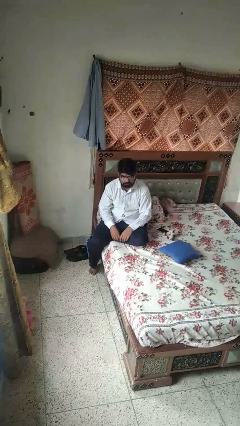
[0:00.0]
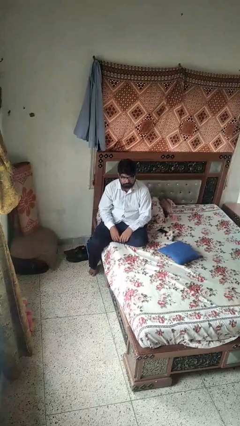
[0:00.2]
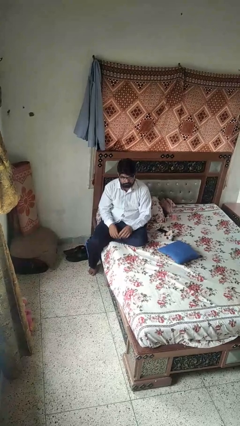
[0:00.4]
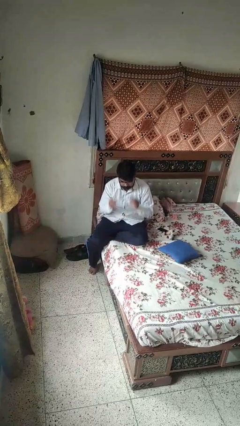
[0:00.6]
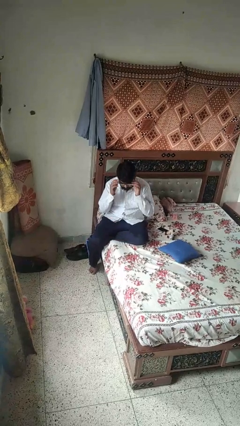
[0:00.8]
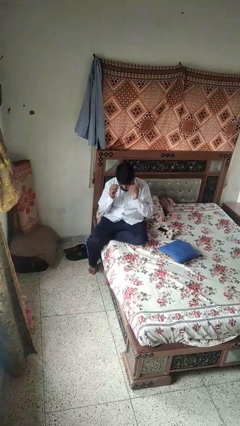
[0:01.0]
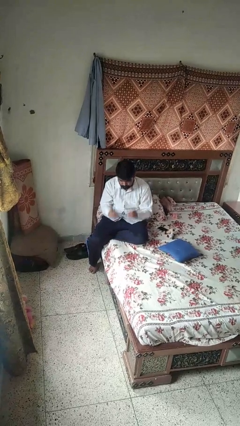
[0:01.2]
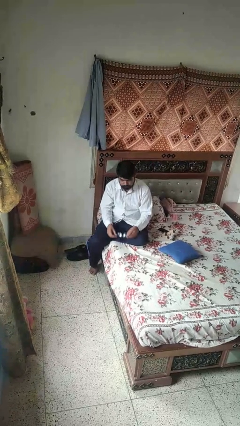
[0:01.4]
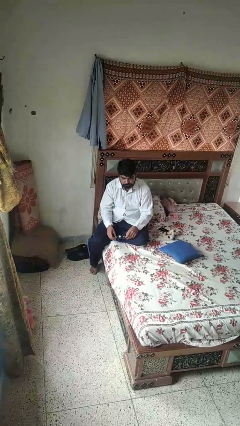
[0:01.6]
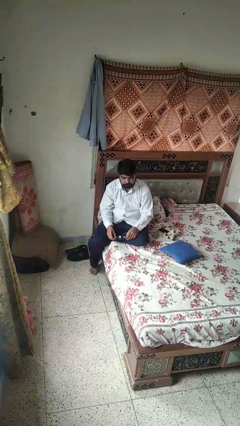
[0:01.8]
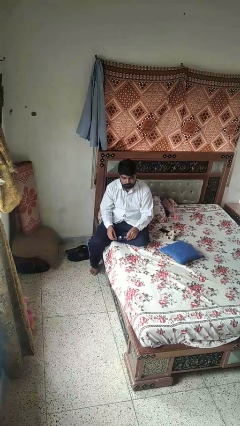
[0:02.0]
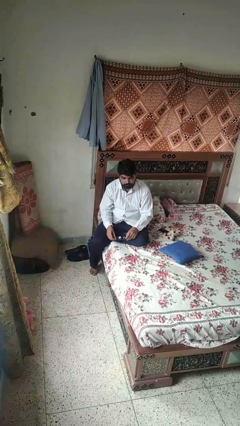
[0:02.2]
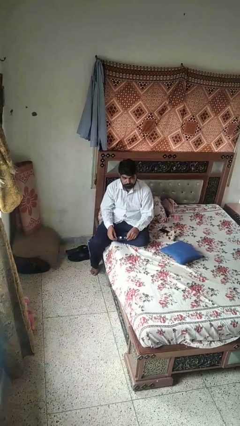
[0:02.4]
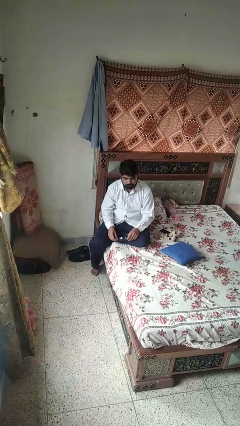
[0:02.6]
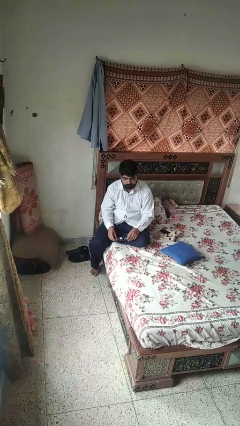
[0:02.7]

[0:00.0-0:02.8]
person takes off glasses

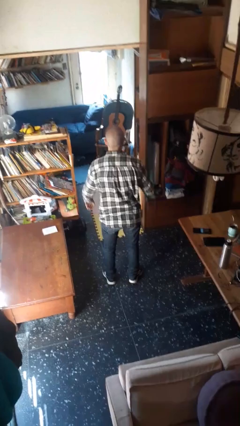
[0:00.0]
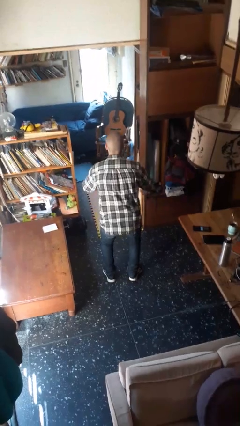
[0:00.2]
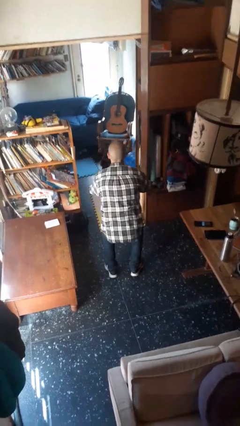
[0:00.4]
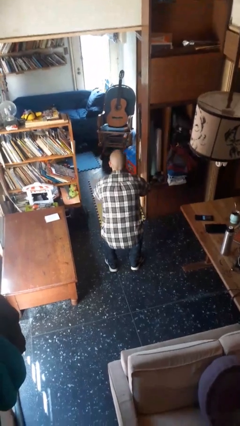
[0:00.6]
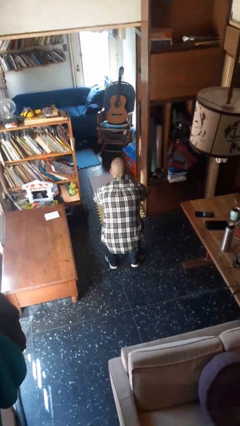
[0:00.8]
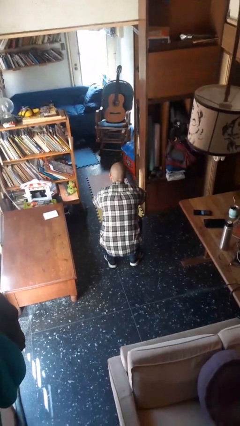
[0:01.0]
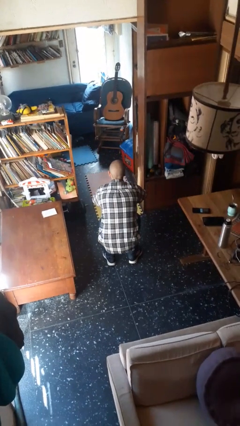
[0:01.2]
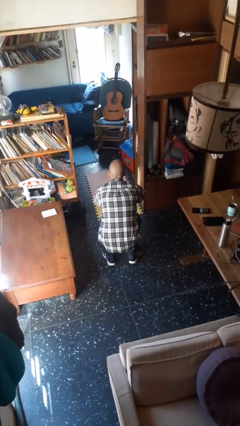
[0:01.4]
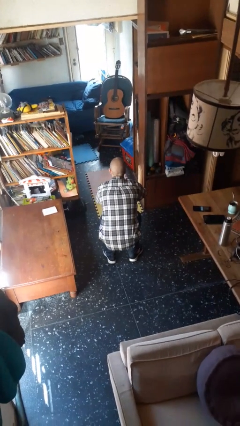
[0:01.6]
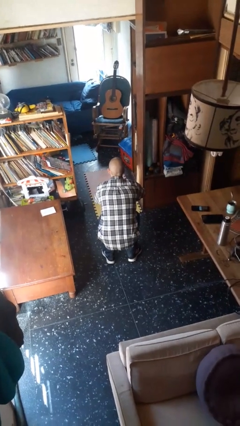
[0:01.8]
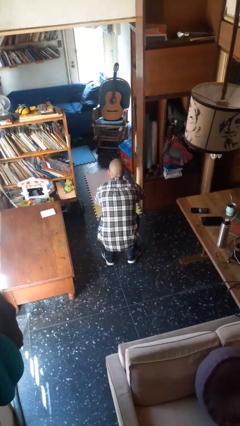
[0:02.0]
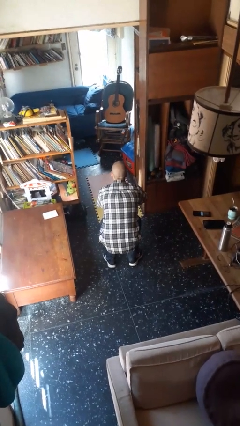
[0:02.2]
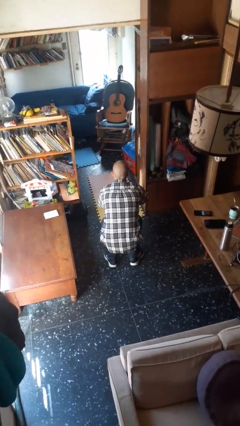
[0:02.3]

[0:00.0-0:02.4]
person squats

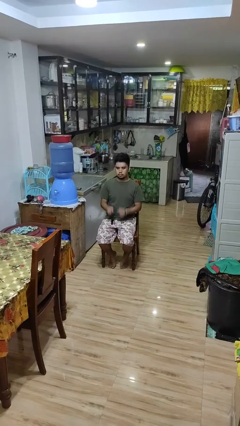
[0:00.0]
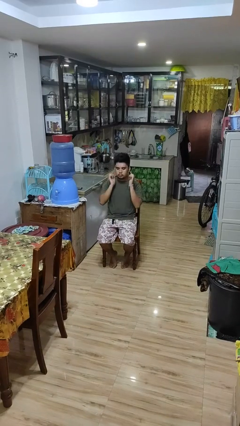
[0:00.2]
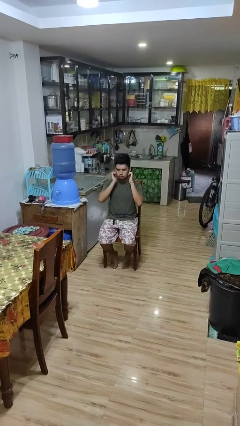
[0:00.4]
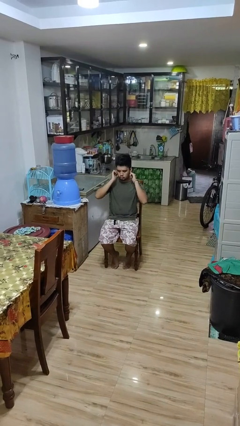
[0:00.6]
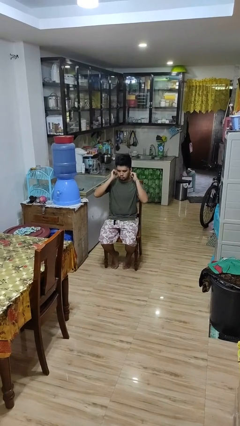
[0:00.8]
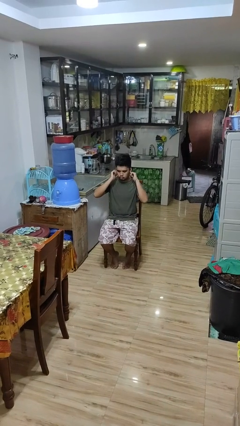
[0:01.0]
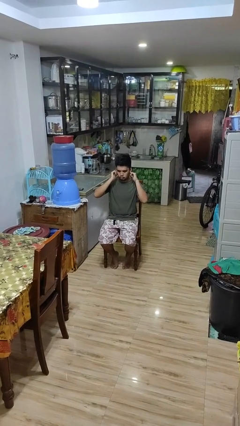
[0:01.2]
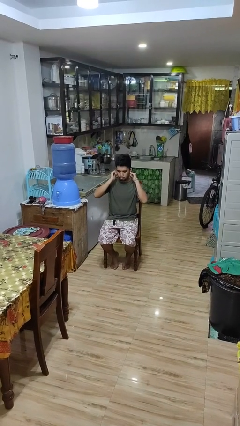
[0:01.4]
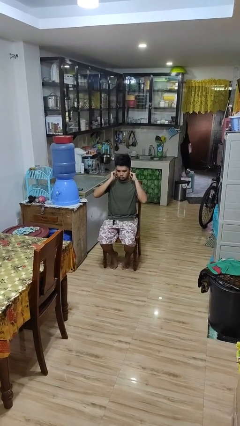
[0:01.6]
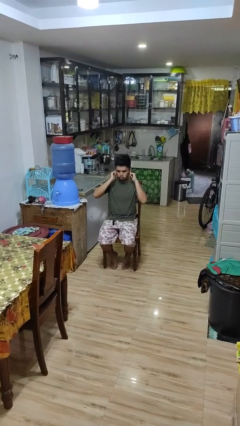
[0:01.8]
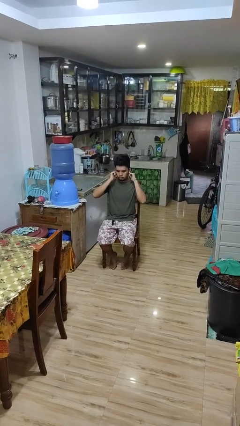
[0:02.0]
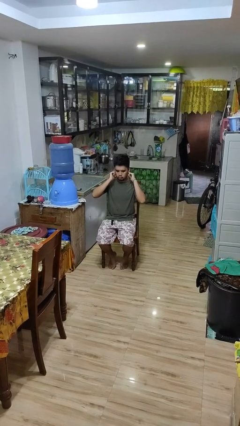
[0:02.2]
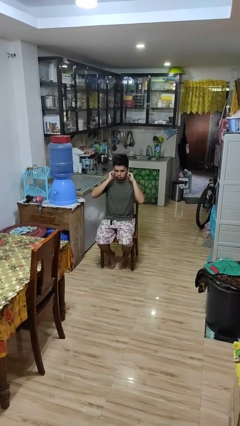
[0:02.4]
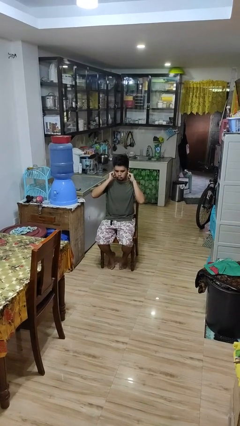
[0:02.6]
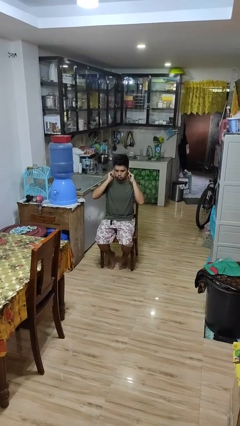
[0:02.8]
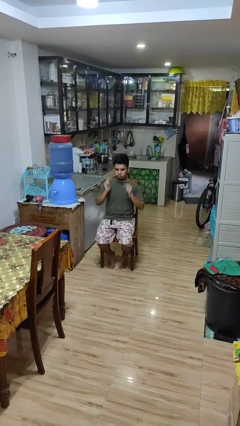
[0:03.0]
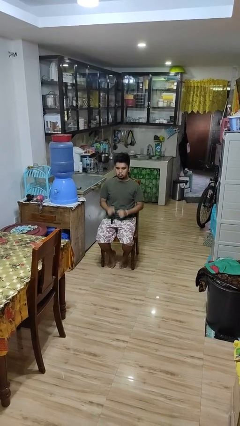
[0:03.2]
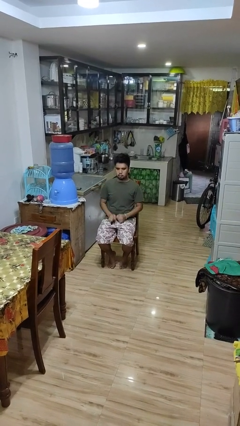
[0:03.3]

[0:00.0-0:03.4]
person puts fingers in ear

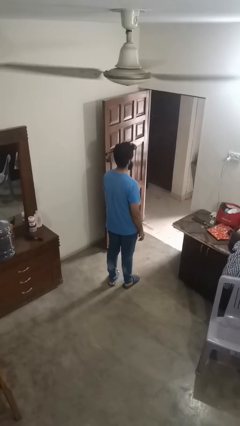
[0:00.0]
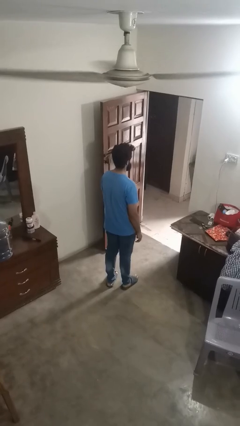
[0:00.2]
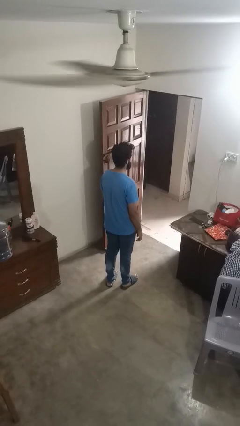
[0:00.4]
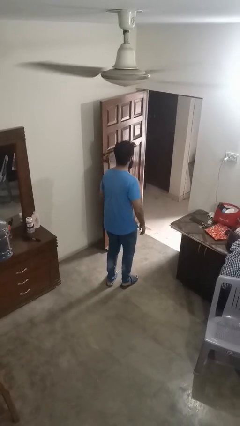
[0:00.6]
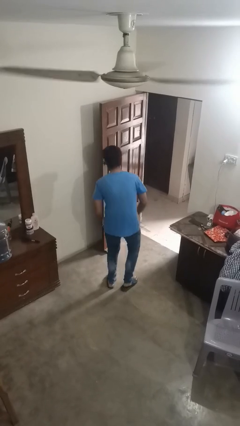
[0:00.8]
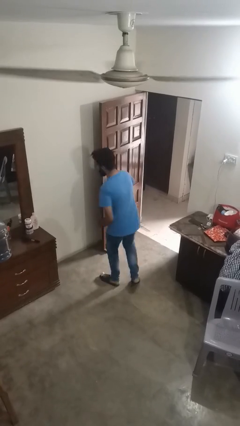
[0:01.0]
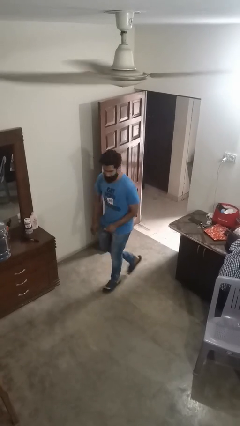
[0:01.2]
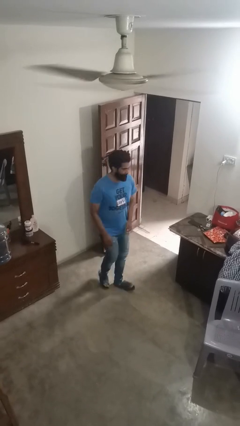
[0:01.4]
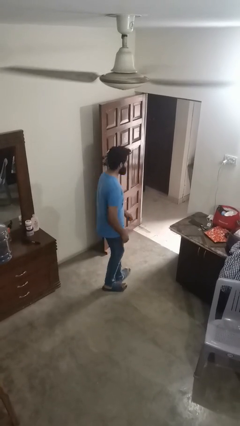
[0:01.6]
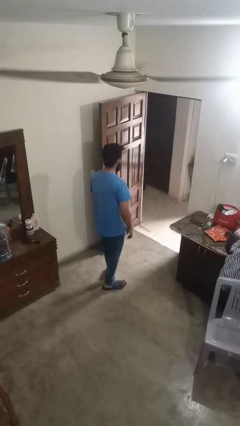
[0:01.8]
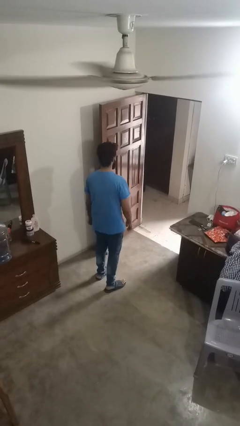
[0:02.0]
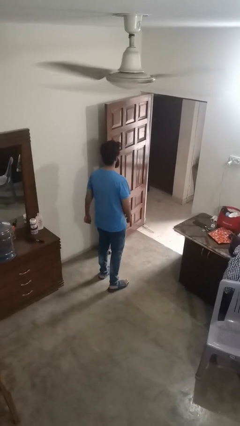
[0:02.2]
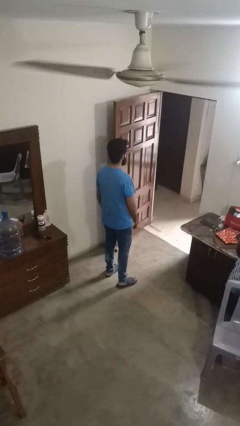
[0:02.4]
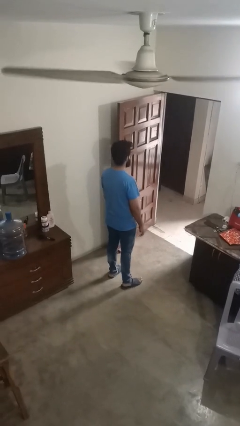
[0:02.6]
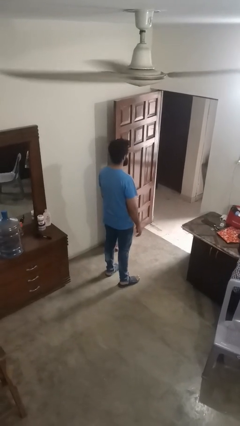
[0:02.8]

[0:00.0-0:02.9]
person twirls

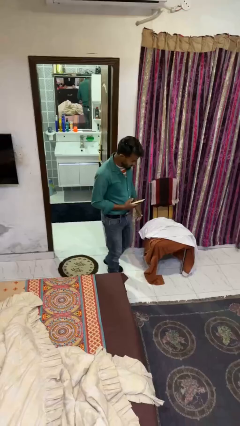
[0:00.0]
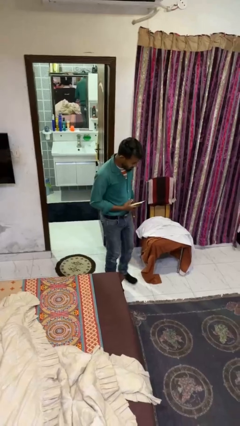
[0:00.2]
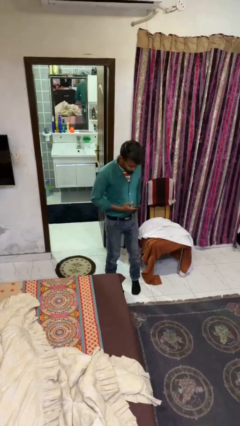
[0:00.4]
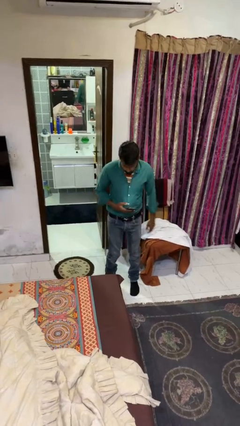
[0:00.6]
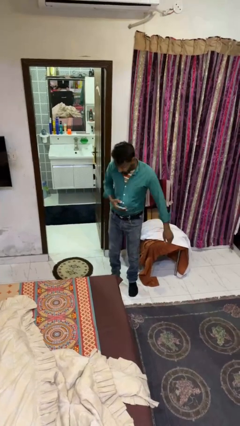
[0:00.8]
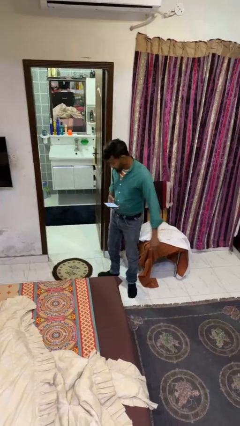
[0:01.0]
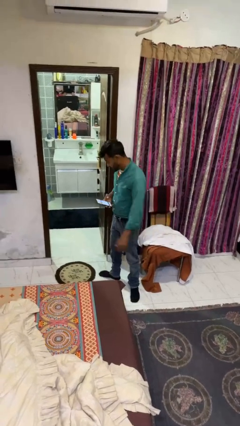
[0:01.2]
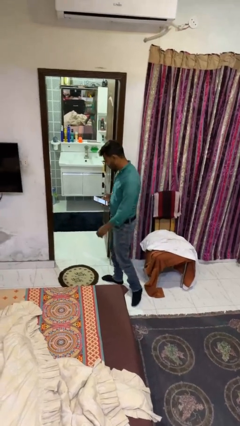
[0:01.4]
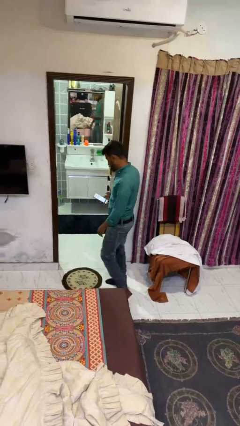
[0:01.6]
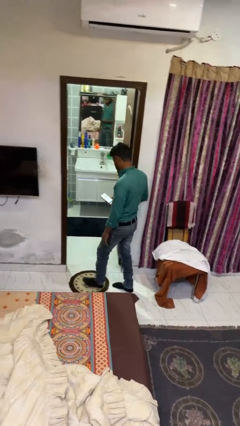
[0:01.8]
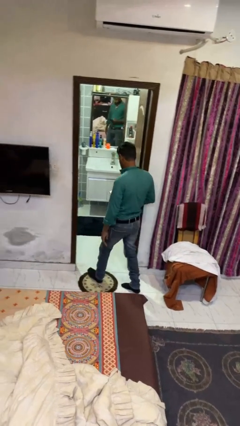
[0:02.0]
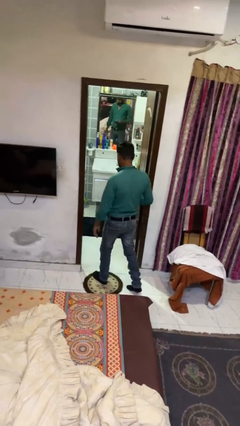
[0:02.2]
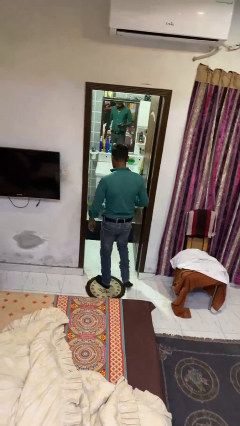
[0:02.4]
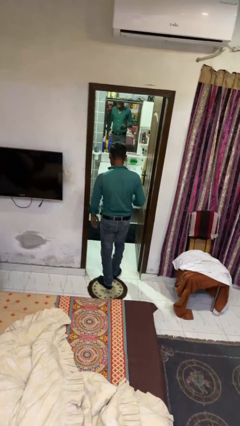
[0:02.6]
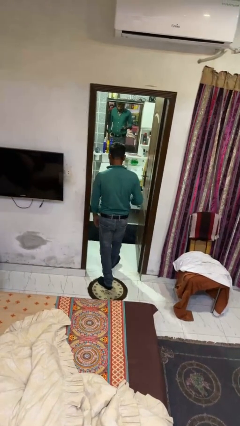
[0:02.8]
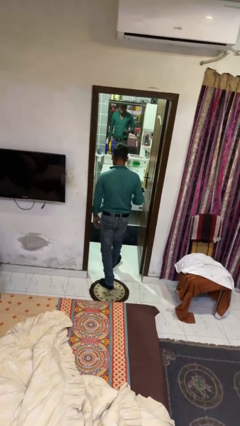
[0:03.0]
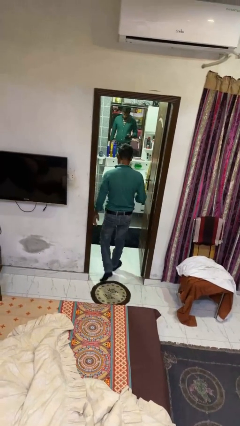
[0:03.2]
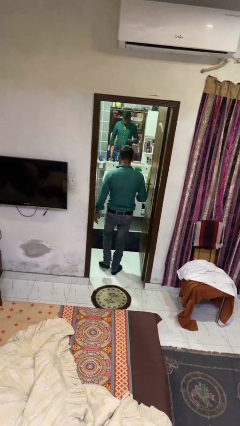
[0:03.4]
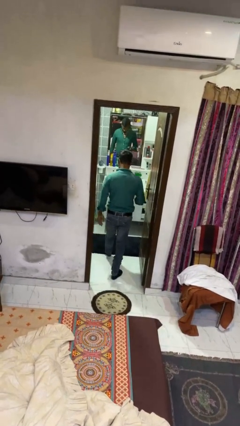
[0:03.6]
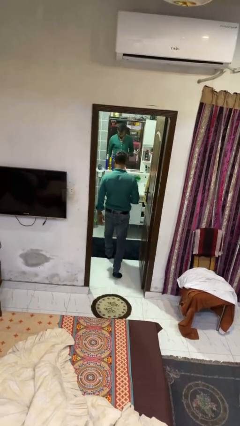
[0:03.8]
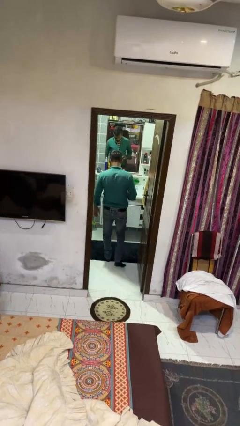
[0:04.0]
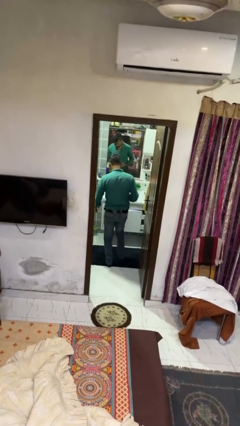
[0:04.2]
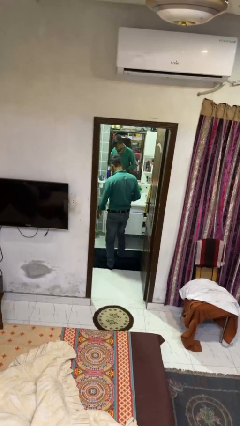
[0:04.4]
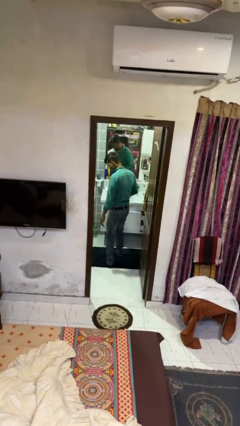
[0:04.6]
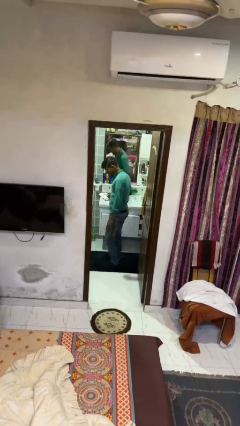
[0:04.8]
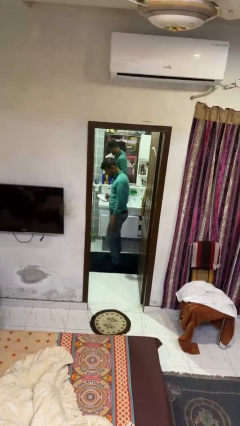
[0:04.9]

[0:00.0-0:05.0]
person exits scene through structure

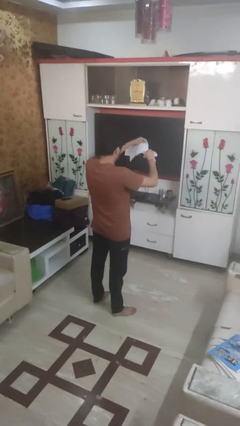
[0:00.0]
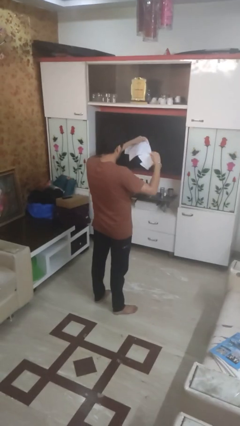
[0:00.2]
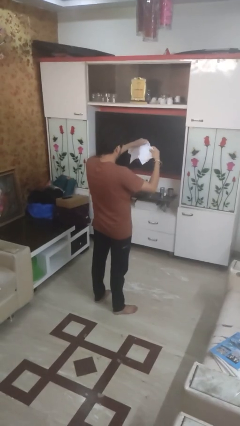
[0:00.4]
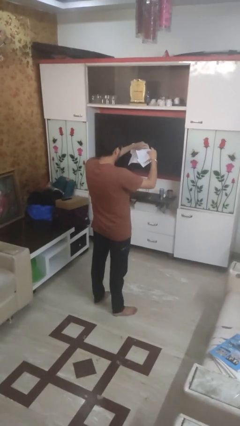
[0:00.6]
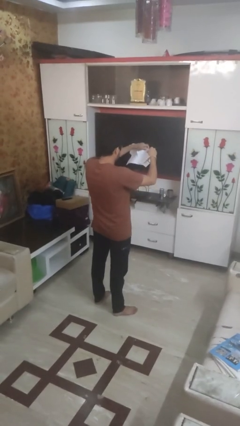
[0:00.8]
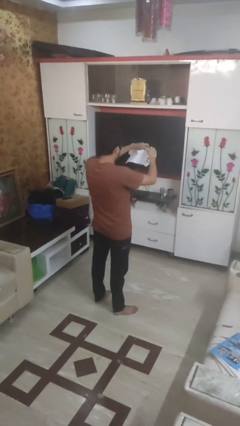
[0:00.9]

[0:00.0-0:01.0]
person tears paper
